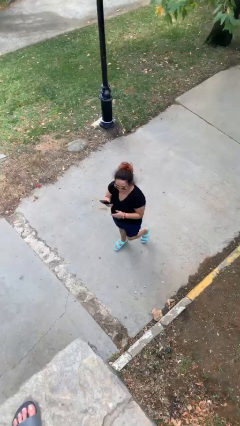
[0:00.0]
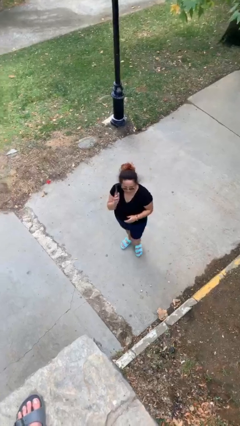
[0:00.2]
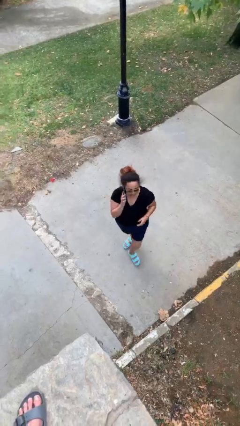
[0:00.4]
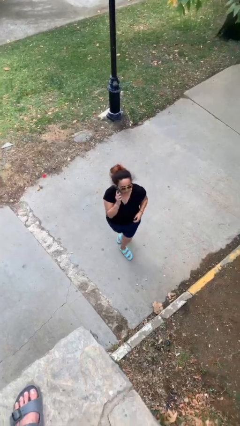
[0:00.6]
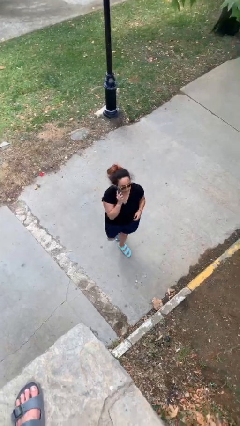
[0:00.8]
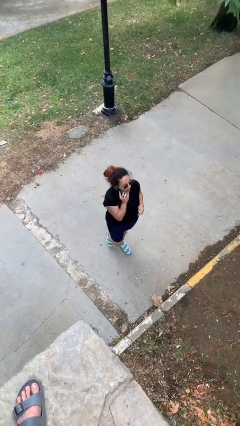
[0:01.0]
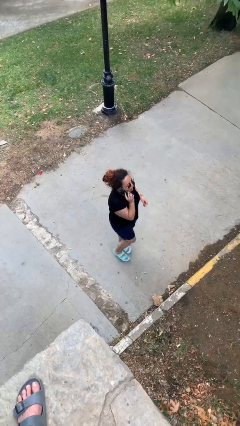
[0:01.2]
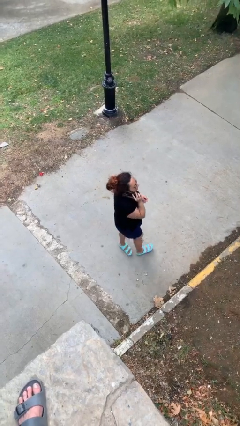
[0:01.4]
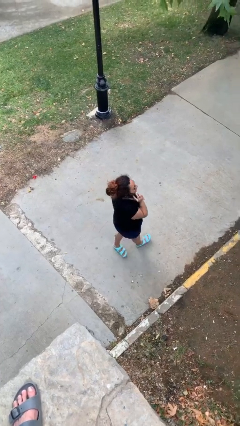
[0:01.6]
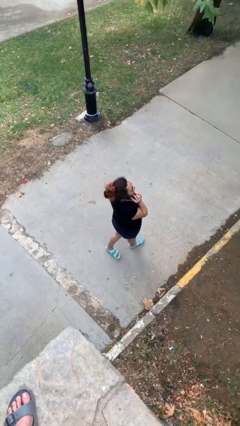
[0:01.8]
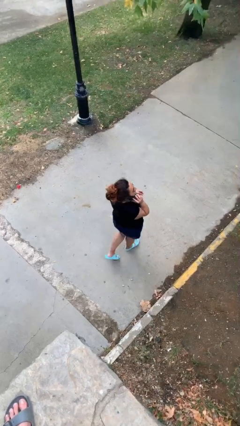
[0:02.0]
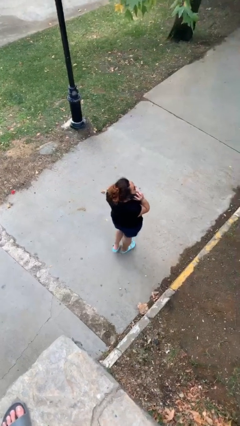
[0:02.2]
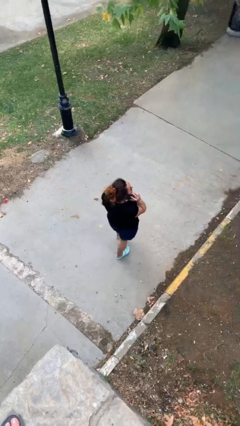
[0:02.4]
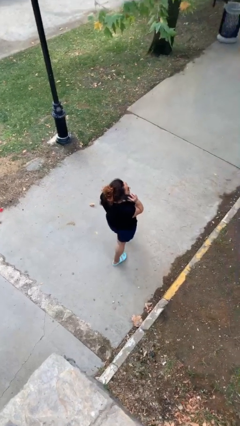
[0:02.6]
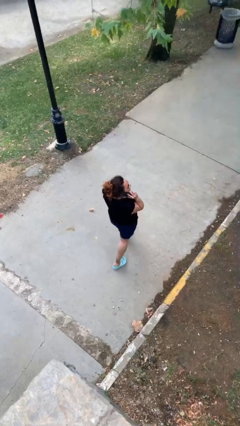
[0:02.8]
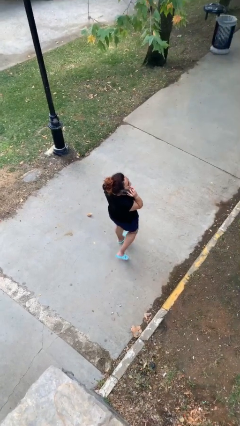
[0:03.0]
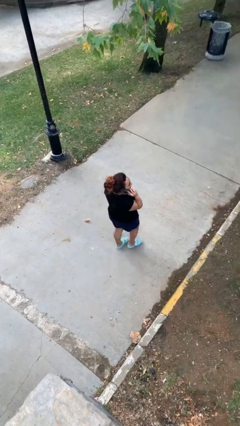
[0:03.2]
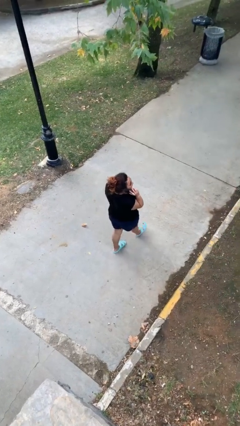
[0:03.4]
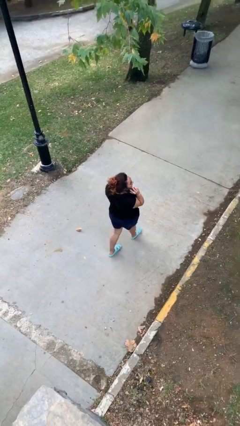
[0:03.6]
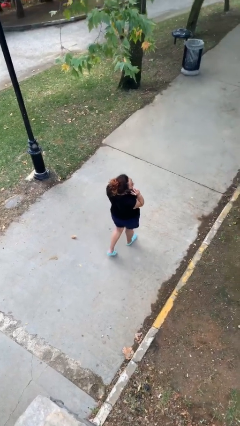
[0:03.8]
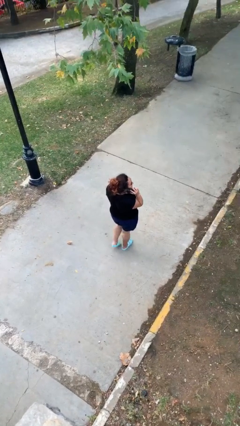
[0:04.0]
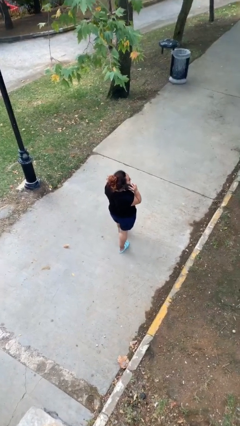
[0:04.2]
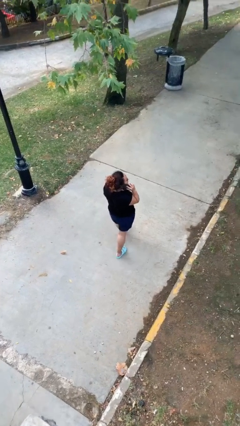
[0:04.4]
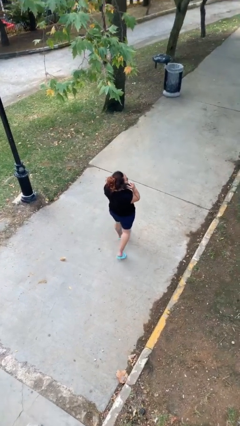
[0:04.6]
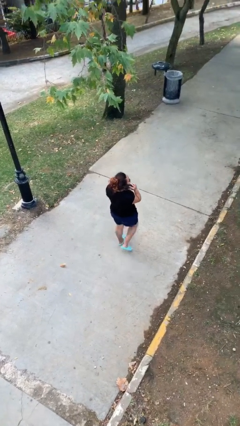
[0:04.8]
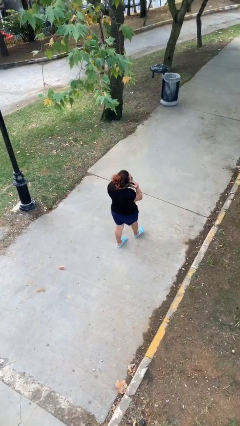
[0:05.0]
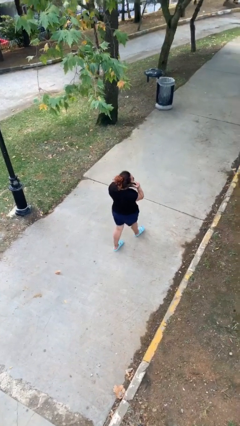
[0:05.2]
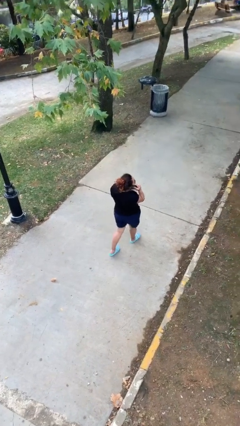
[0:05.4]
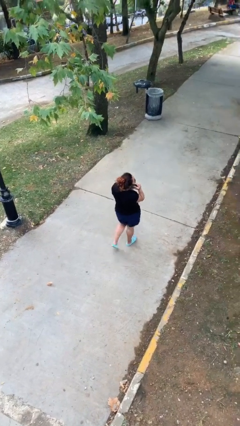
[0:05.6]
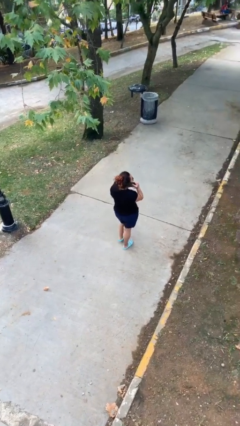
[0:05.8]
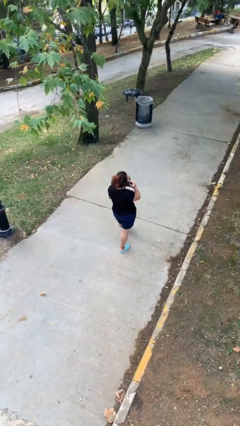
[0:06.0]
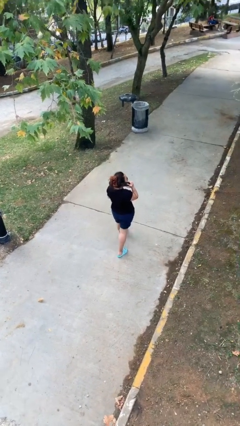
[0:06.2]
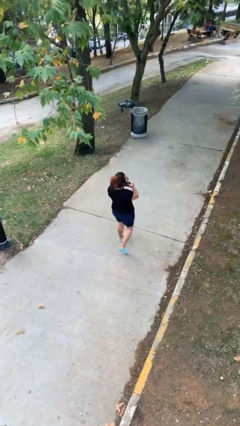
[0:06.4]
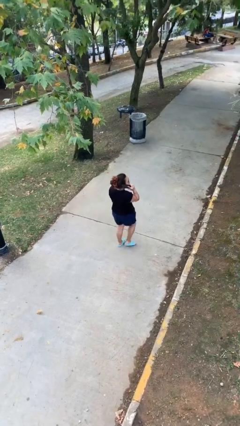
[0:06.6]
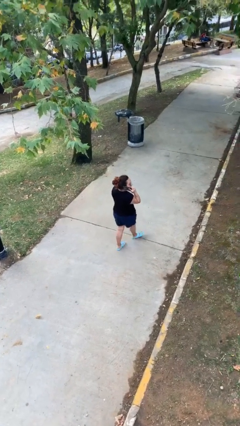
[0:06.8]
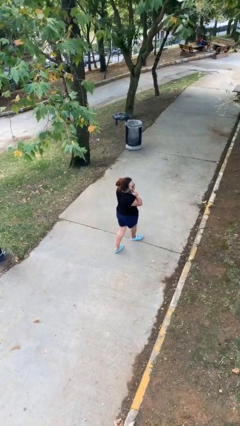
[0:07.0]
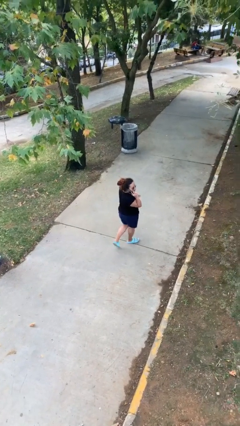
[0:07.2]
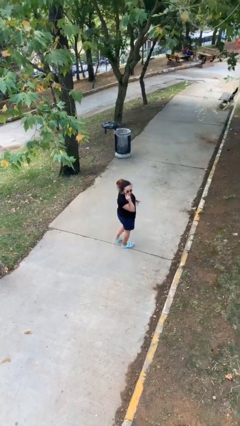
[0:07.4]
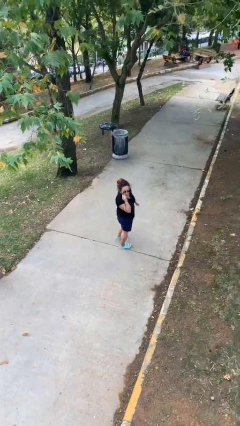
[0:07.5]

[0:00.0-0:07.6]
person talks on phone

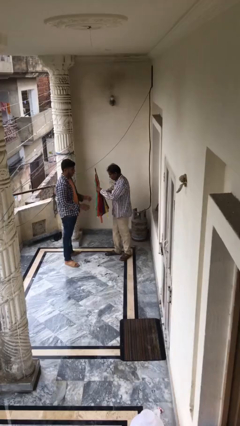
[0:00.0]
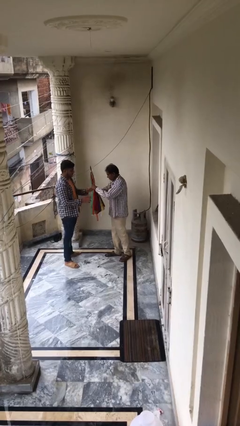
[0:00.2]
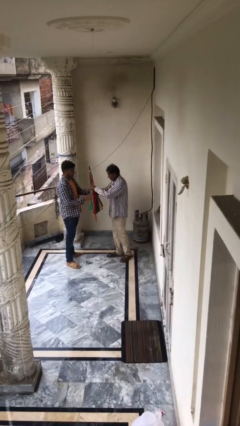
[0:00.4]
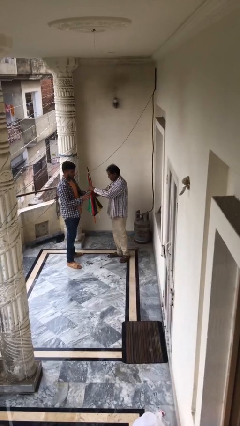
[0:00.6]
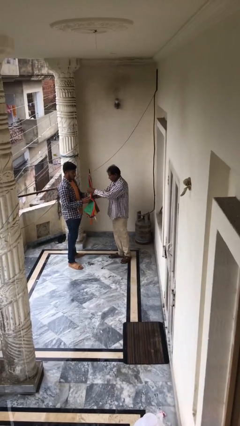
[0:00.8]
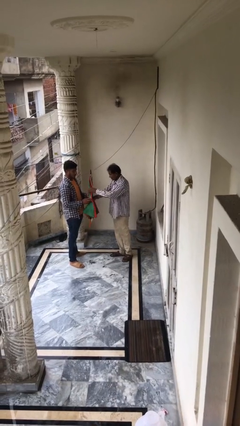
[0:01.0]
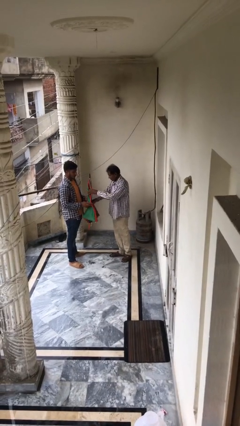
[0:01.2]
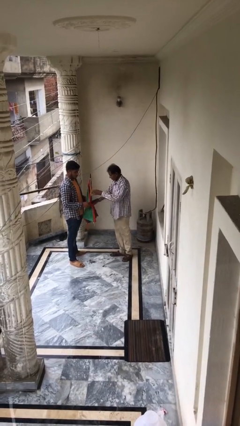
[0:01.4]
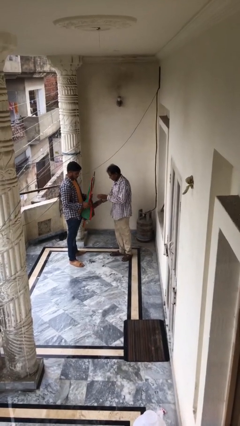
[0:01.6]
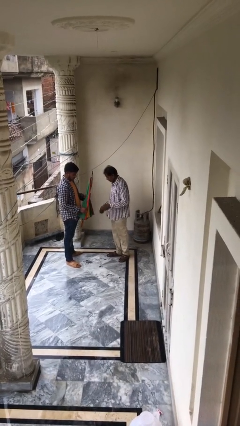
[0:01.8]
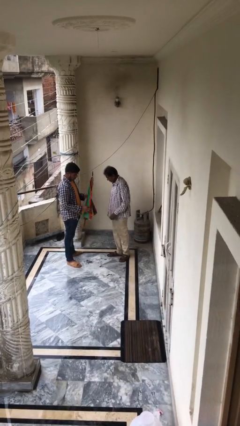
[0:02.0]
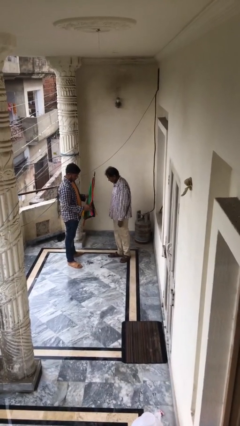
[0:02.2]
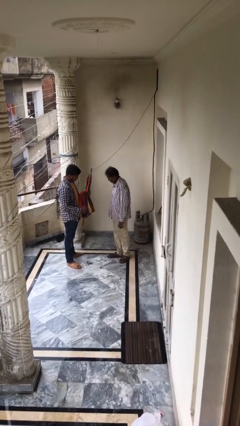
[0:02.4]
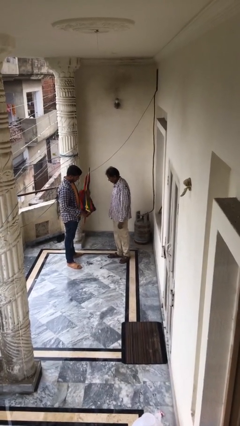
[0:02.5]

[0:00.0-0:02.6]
person transfers object to person

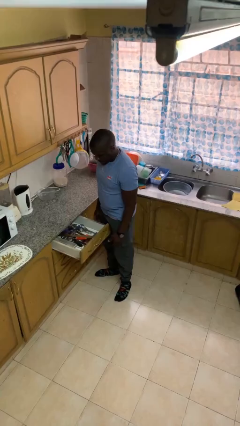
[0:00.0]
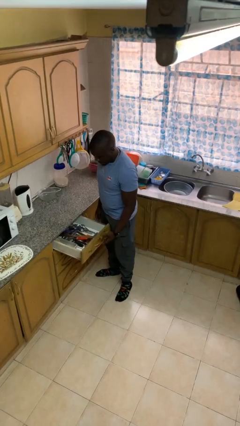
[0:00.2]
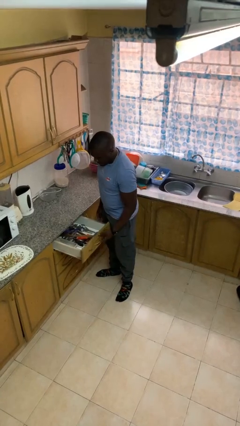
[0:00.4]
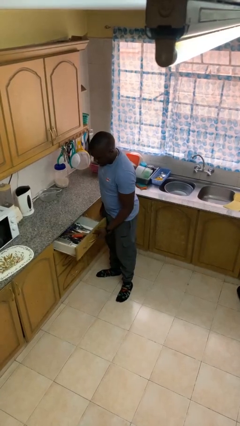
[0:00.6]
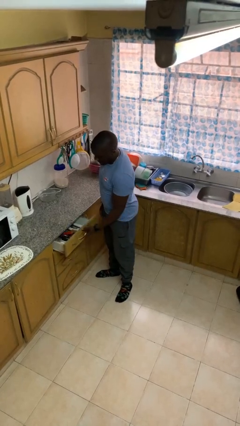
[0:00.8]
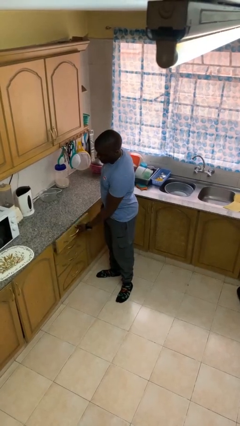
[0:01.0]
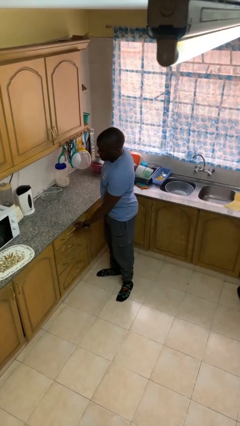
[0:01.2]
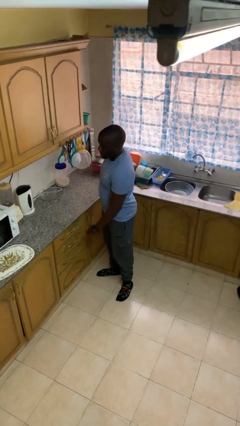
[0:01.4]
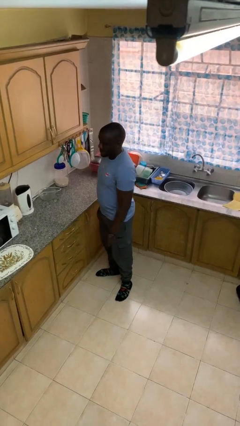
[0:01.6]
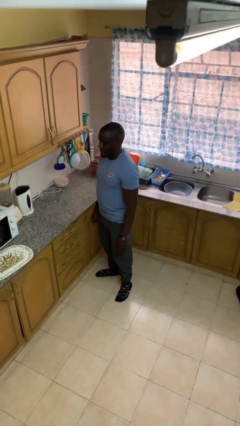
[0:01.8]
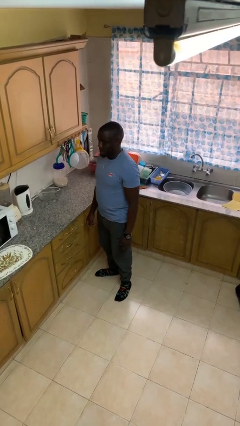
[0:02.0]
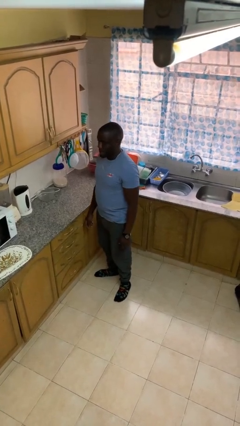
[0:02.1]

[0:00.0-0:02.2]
person closes kitchen drawer

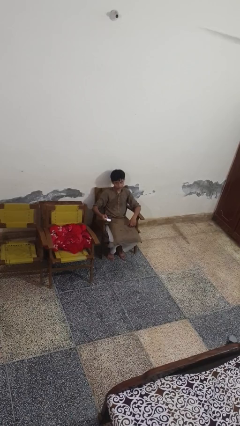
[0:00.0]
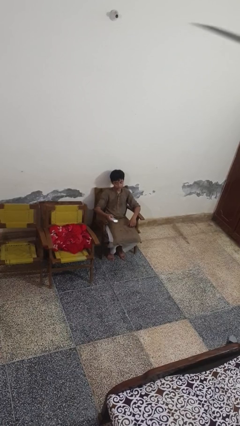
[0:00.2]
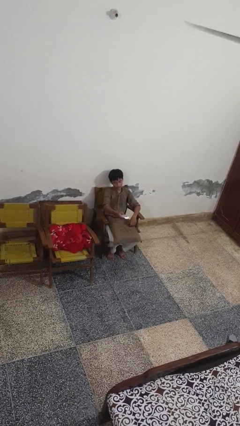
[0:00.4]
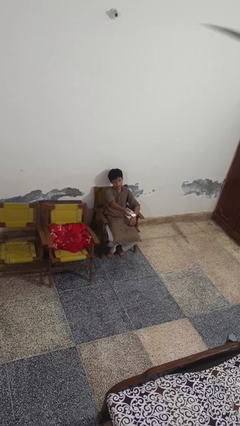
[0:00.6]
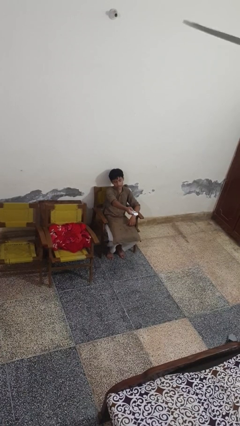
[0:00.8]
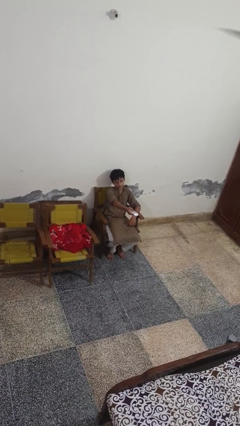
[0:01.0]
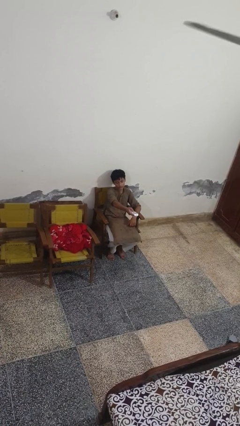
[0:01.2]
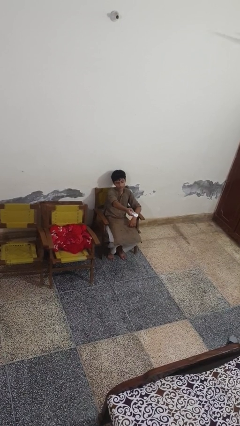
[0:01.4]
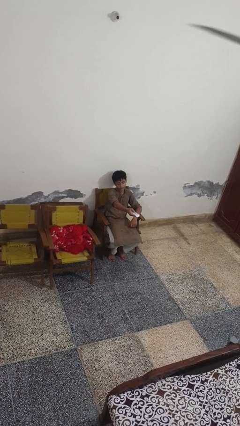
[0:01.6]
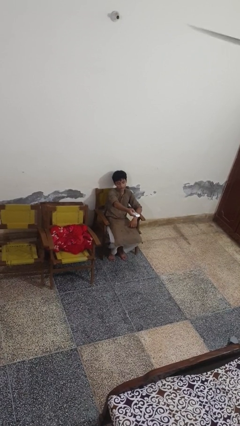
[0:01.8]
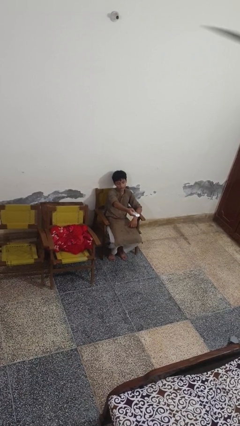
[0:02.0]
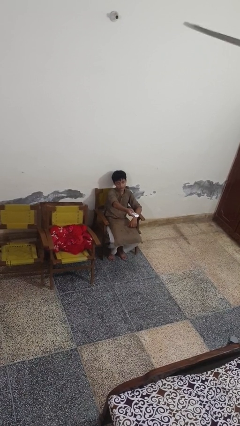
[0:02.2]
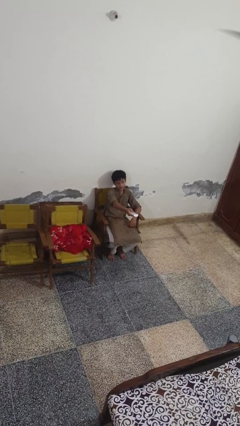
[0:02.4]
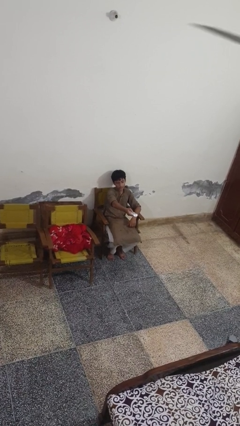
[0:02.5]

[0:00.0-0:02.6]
person uses television remote

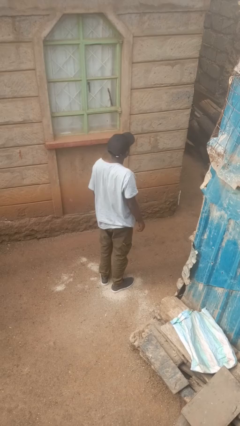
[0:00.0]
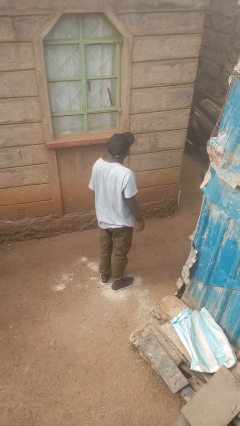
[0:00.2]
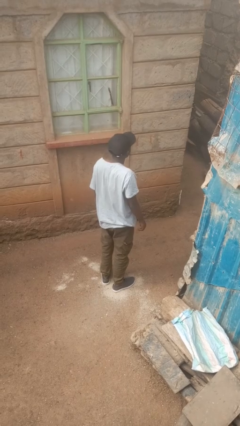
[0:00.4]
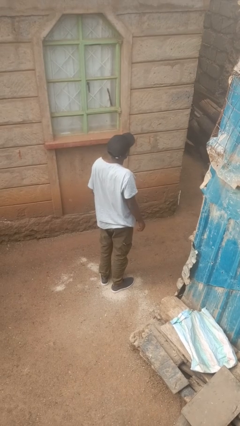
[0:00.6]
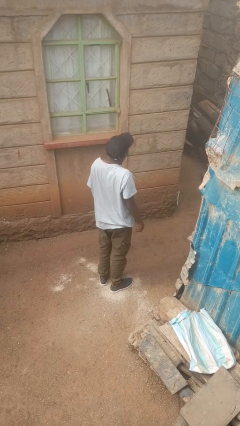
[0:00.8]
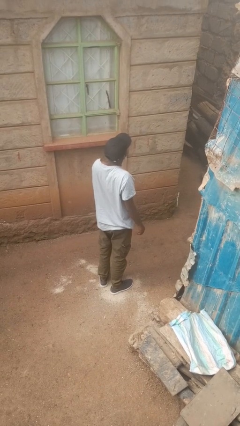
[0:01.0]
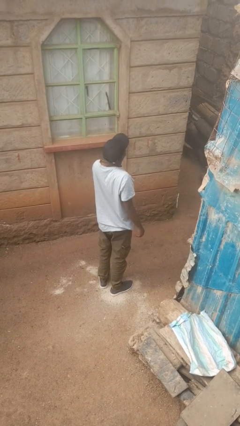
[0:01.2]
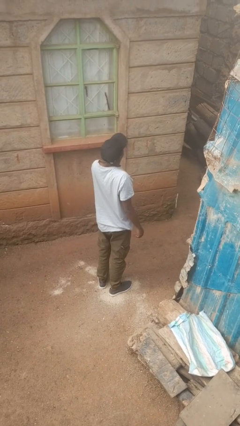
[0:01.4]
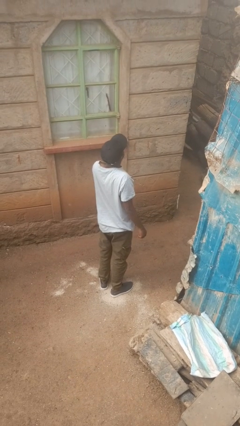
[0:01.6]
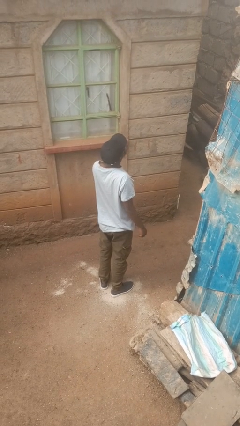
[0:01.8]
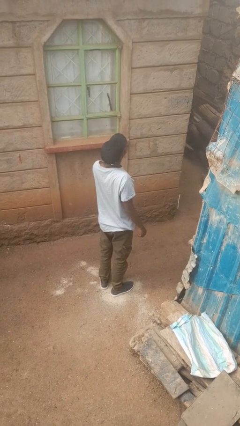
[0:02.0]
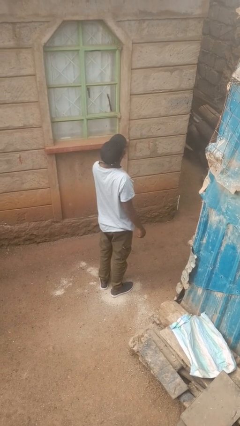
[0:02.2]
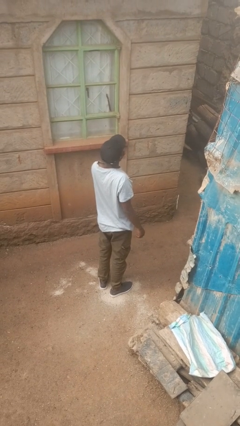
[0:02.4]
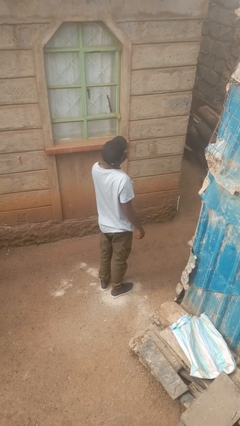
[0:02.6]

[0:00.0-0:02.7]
person yawns
